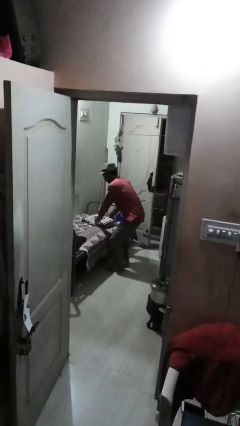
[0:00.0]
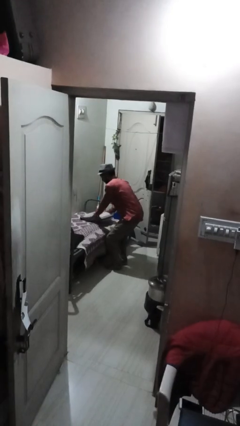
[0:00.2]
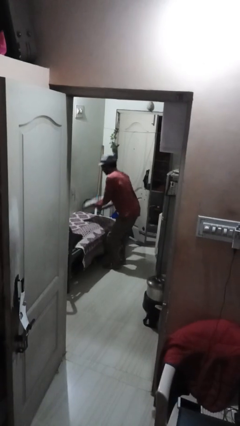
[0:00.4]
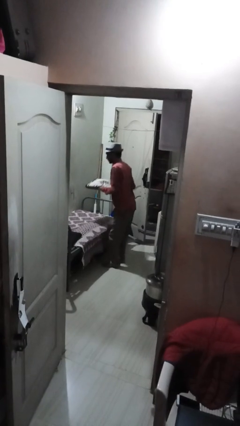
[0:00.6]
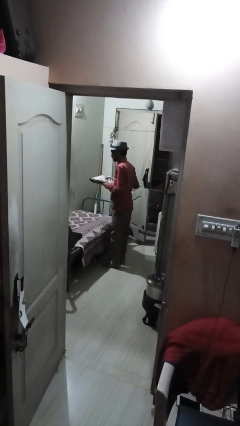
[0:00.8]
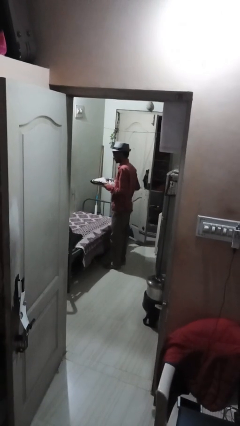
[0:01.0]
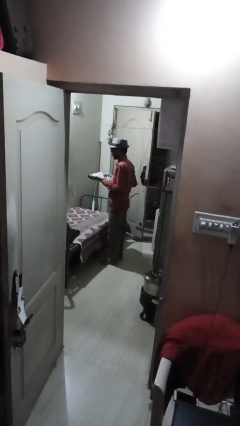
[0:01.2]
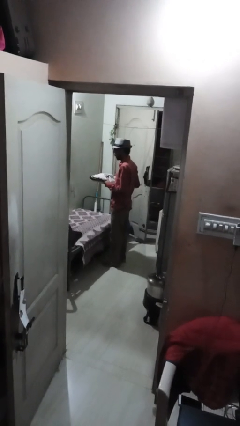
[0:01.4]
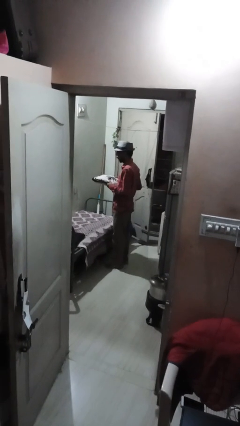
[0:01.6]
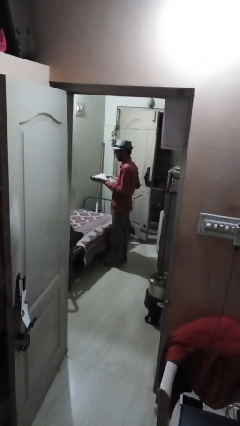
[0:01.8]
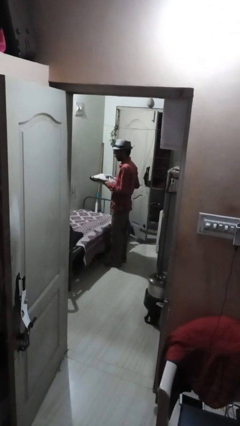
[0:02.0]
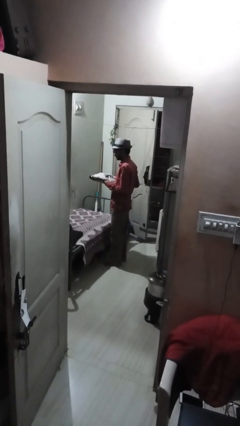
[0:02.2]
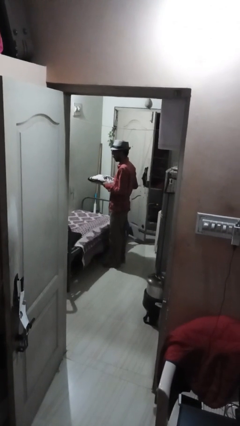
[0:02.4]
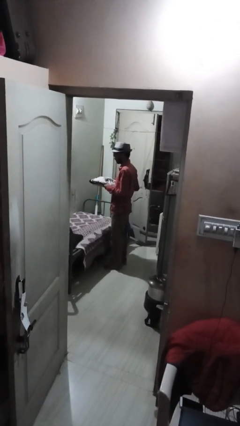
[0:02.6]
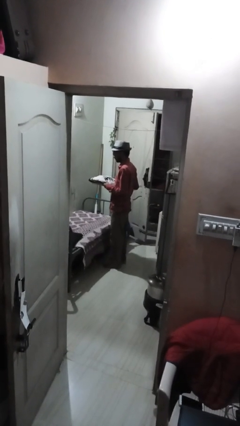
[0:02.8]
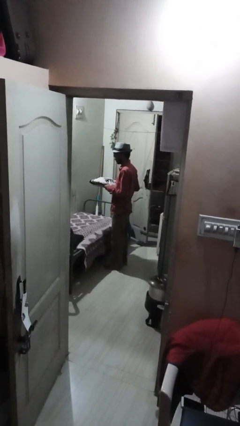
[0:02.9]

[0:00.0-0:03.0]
person picks up object from bed

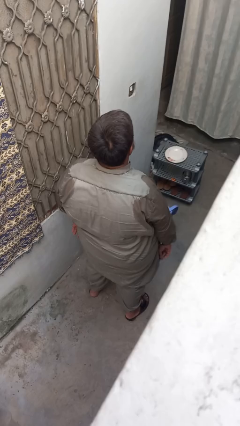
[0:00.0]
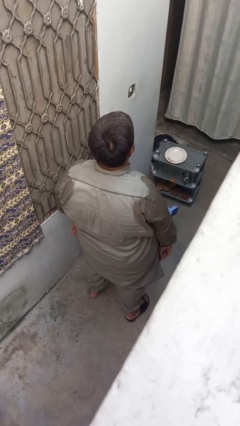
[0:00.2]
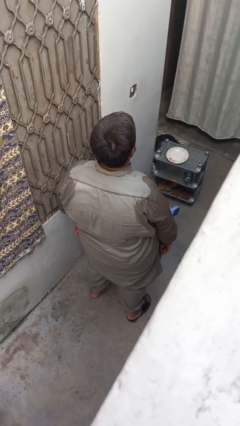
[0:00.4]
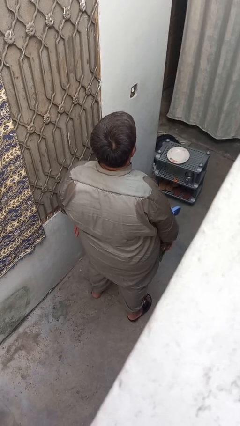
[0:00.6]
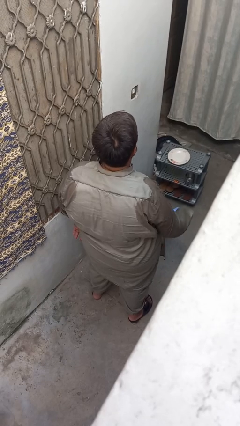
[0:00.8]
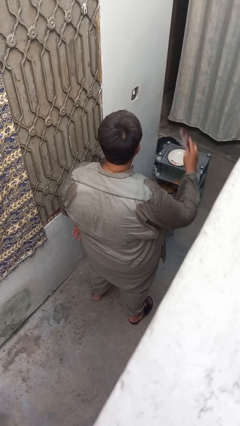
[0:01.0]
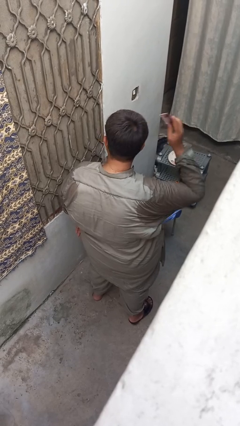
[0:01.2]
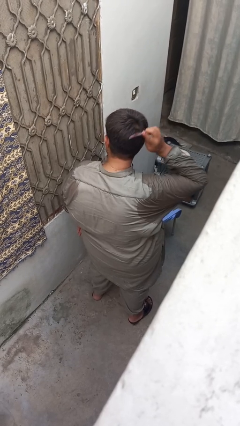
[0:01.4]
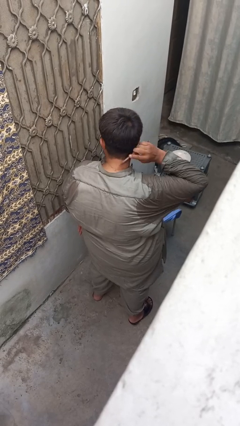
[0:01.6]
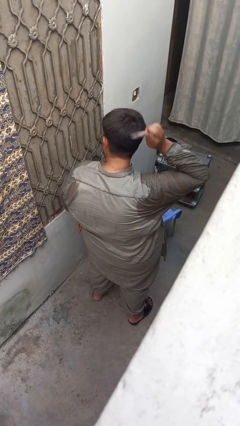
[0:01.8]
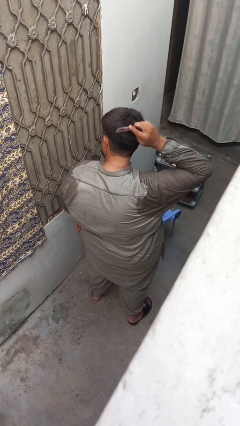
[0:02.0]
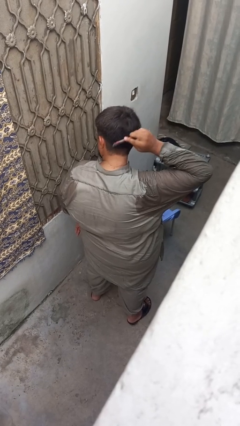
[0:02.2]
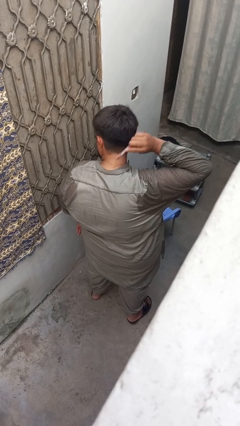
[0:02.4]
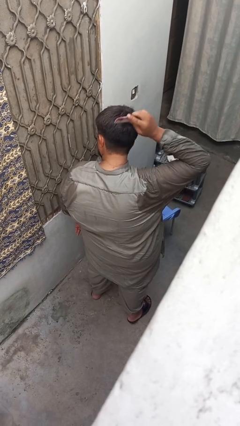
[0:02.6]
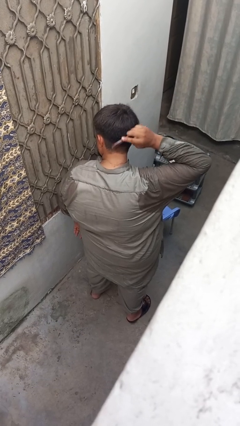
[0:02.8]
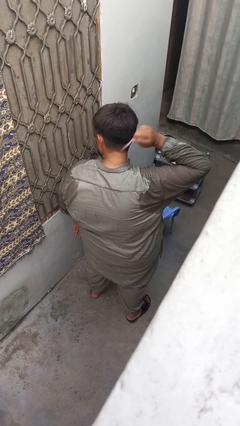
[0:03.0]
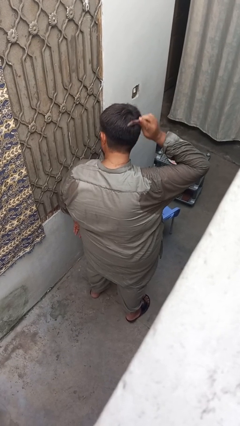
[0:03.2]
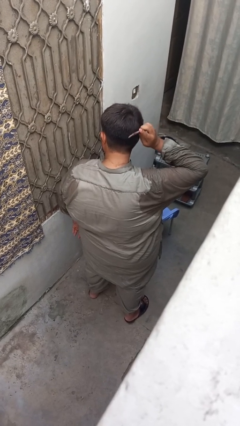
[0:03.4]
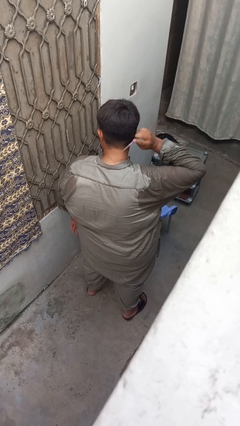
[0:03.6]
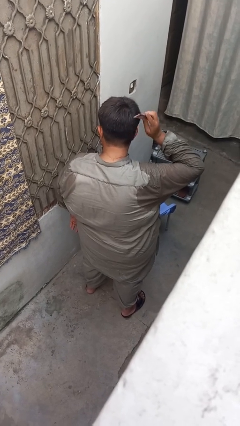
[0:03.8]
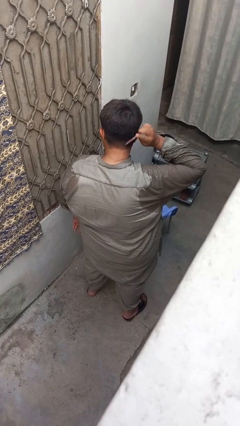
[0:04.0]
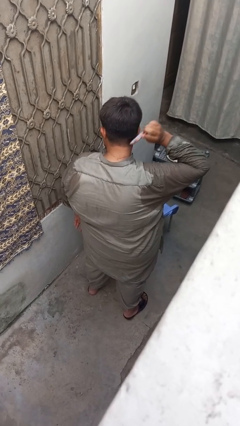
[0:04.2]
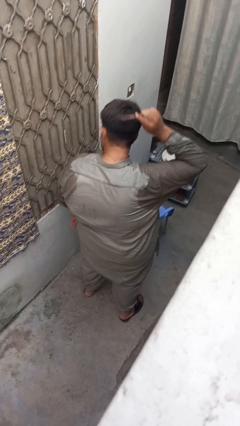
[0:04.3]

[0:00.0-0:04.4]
person brushes hair

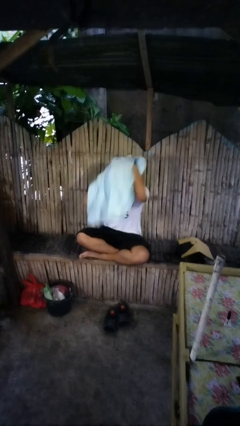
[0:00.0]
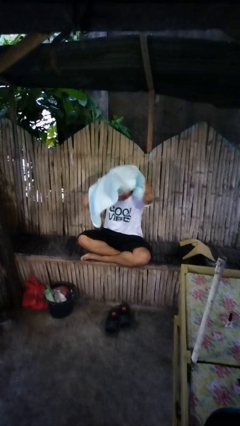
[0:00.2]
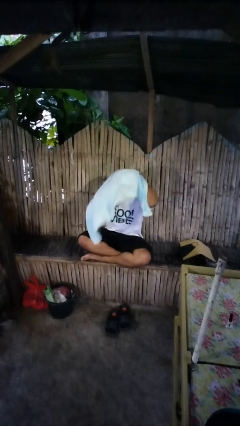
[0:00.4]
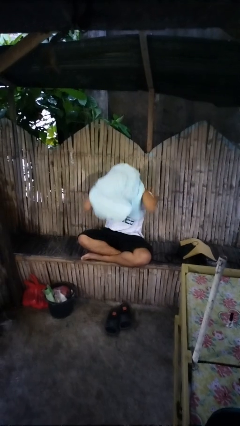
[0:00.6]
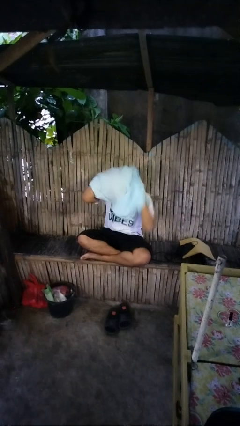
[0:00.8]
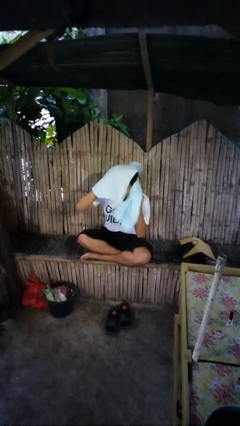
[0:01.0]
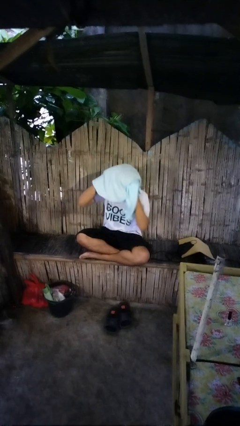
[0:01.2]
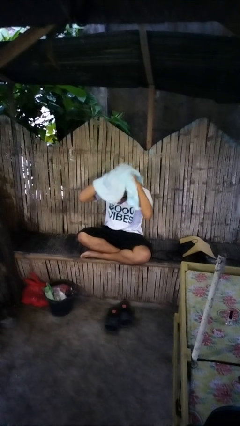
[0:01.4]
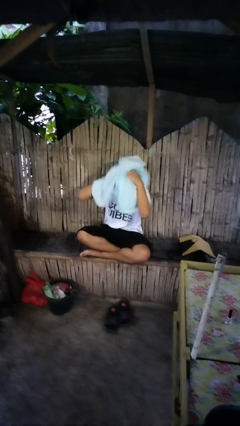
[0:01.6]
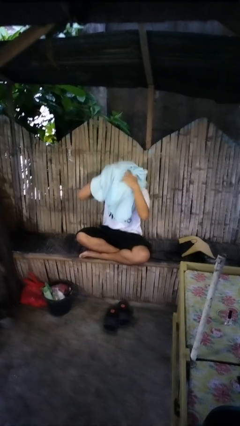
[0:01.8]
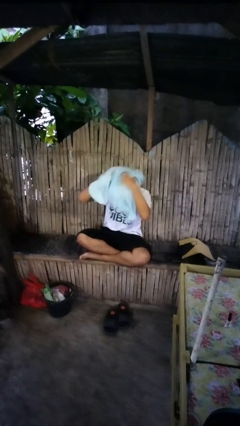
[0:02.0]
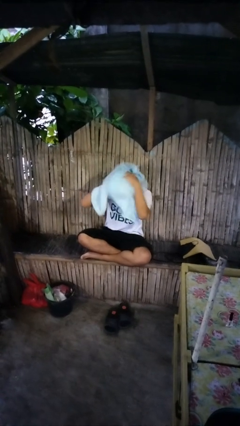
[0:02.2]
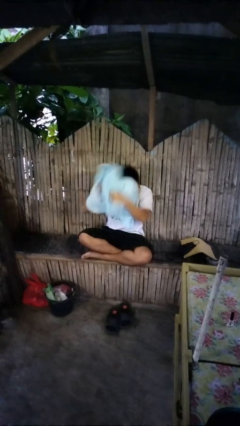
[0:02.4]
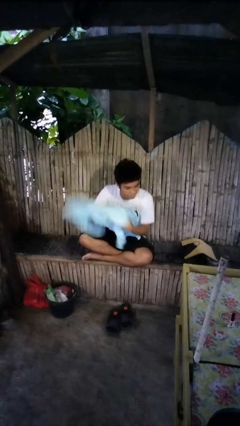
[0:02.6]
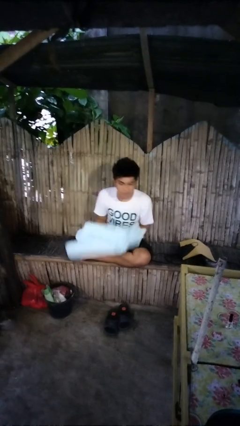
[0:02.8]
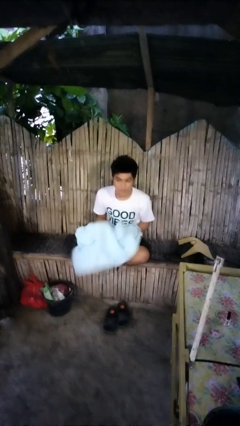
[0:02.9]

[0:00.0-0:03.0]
person dries hair with towel

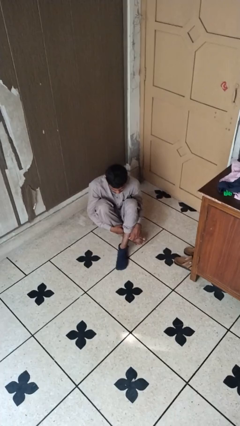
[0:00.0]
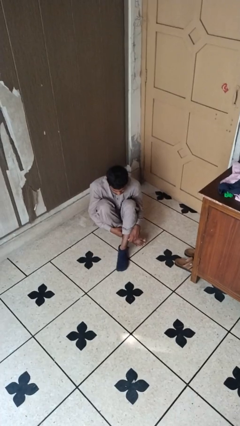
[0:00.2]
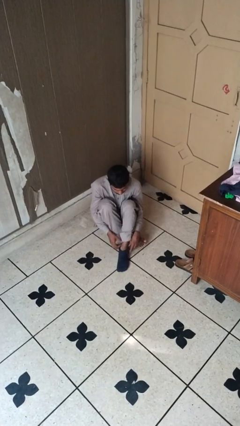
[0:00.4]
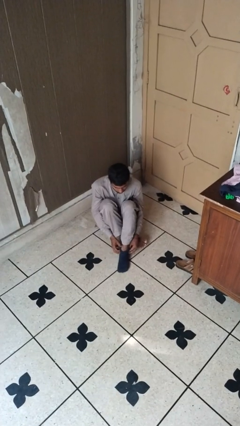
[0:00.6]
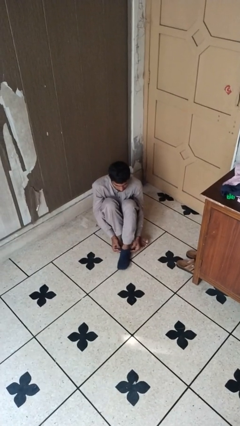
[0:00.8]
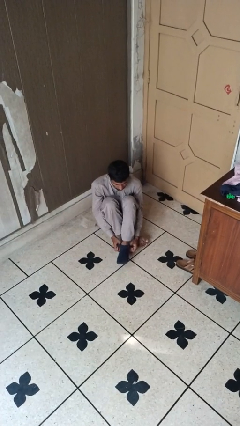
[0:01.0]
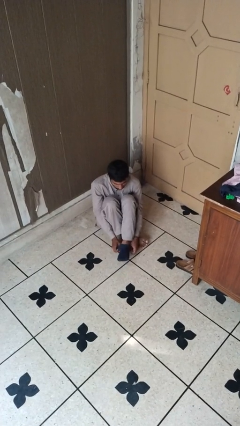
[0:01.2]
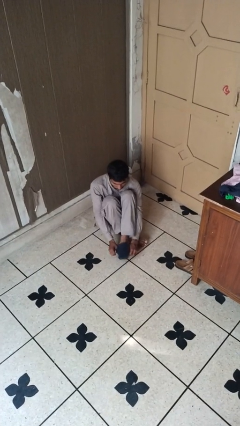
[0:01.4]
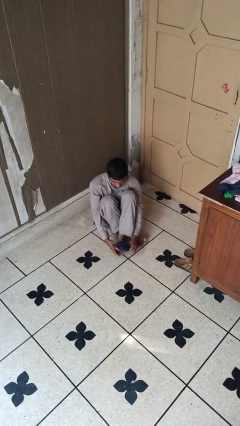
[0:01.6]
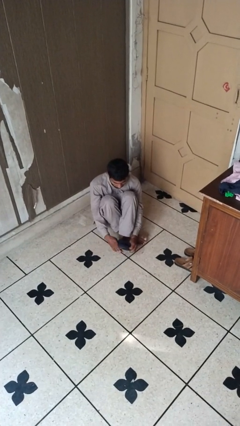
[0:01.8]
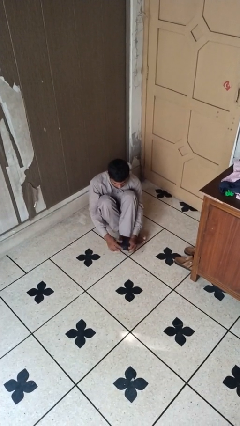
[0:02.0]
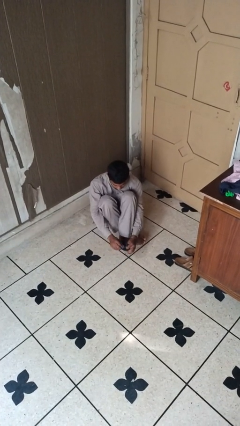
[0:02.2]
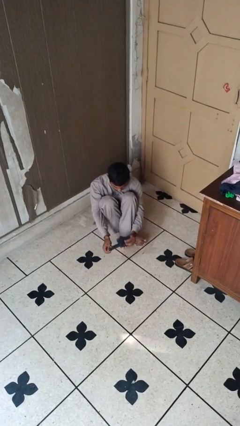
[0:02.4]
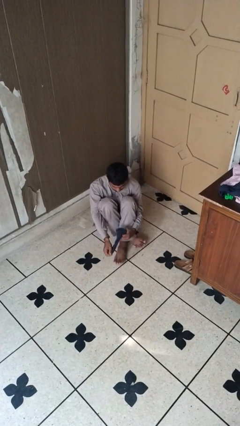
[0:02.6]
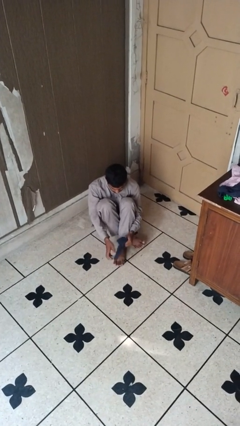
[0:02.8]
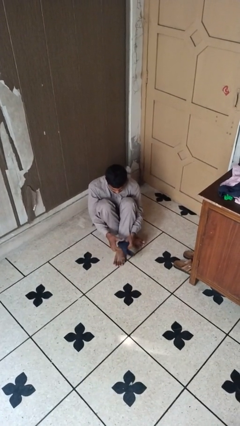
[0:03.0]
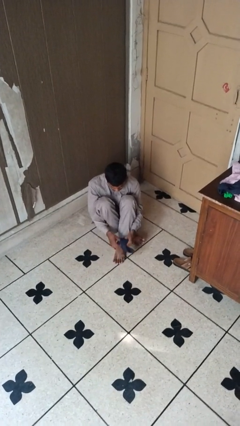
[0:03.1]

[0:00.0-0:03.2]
person takes off socks

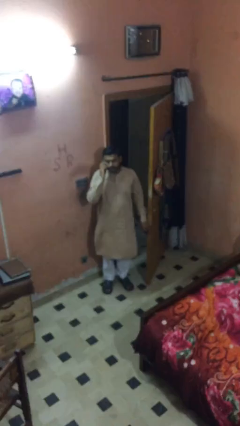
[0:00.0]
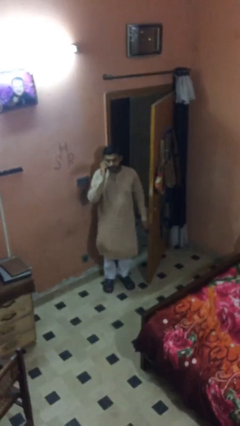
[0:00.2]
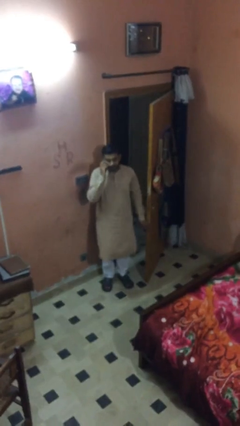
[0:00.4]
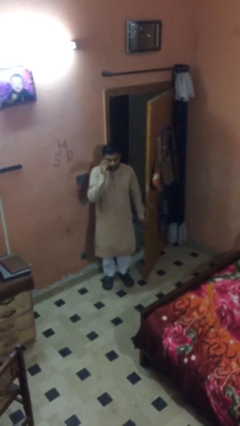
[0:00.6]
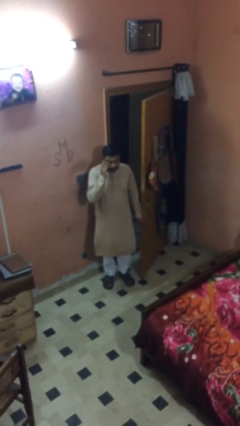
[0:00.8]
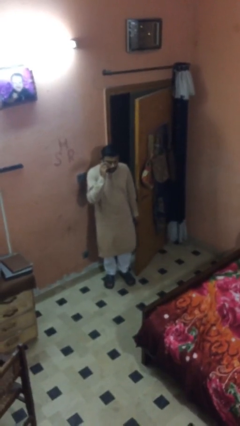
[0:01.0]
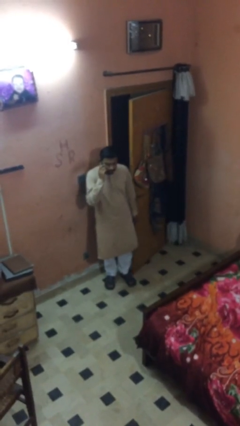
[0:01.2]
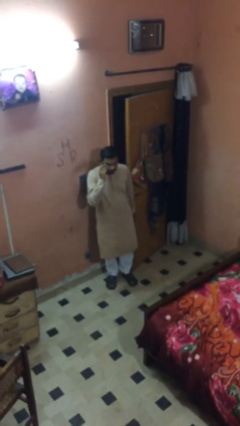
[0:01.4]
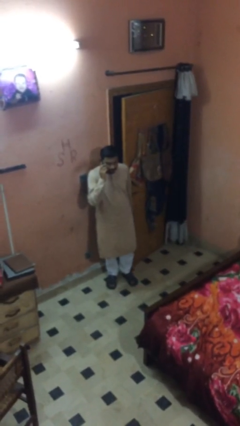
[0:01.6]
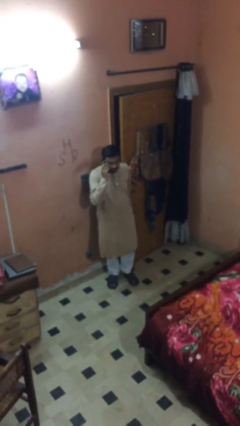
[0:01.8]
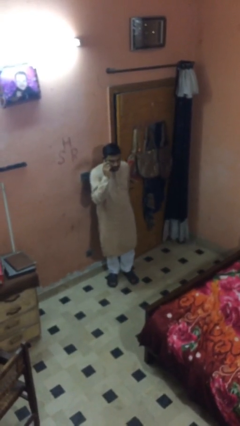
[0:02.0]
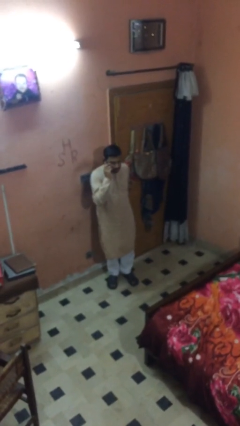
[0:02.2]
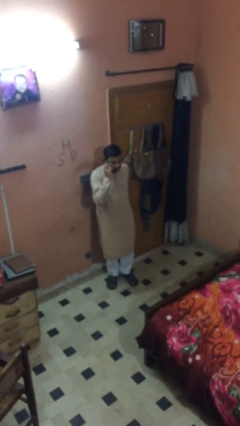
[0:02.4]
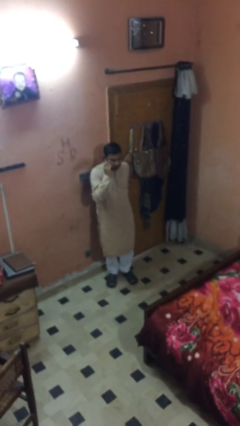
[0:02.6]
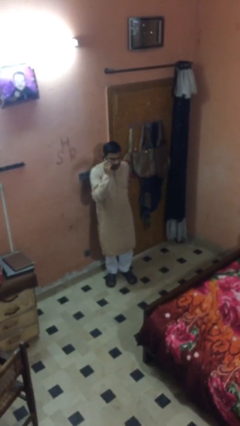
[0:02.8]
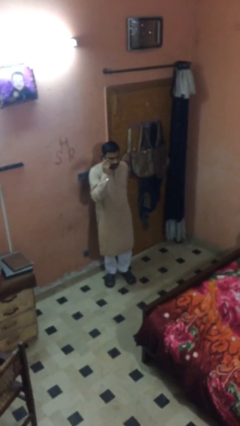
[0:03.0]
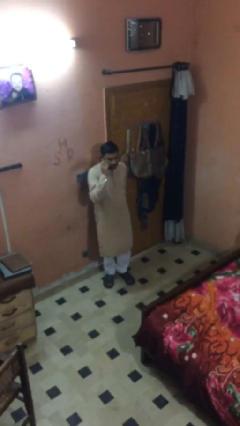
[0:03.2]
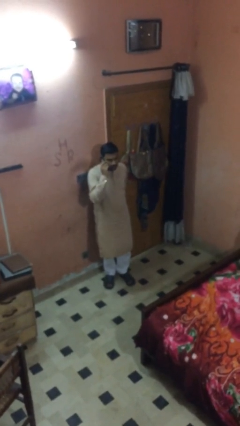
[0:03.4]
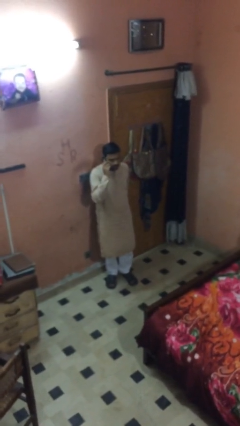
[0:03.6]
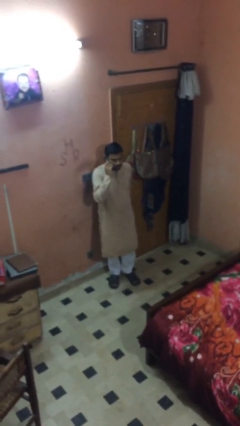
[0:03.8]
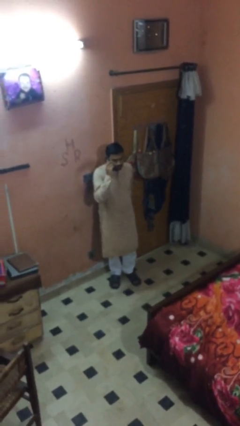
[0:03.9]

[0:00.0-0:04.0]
person closes facility door
